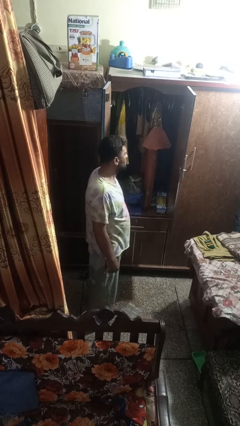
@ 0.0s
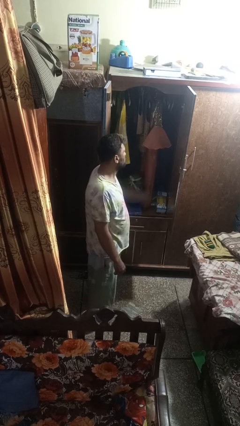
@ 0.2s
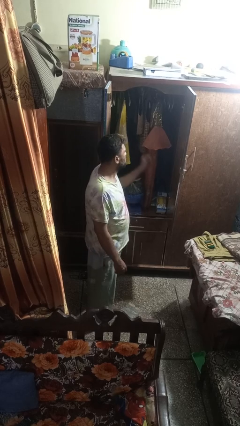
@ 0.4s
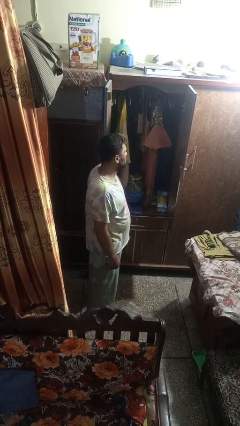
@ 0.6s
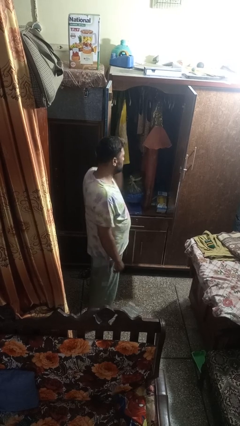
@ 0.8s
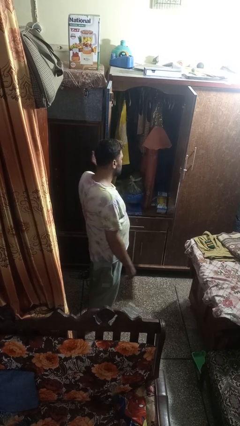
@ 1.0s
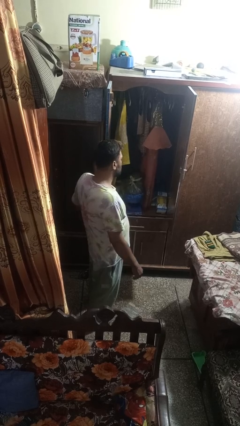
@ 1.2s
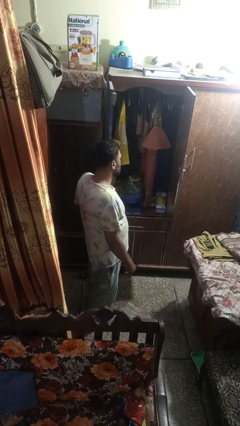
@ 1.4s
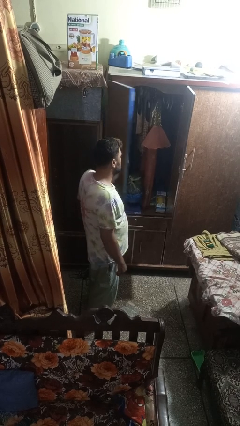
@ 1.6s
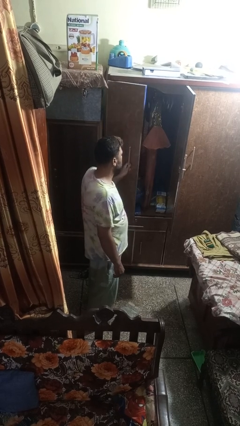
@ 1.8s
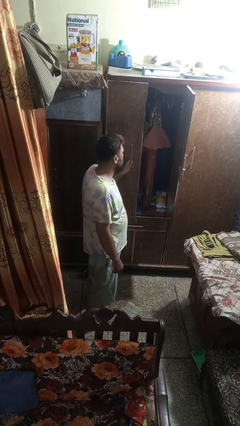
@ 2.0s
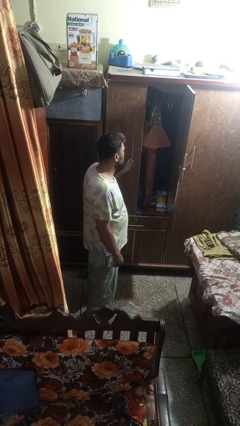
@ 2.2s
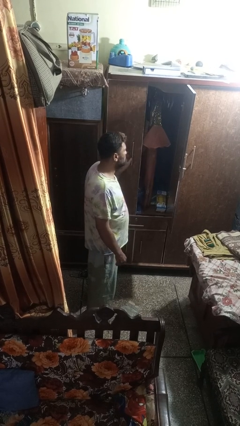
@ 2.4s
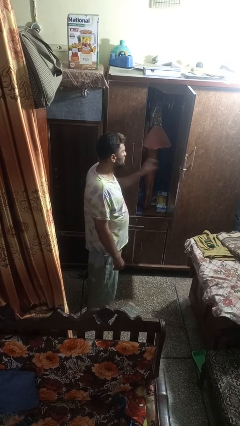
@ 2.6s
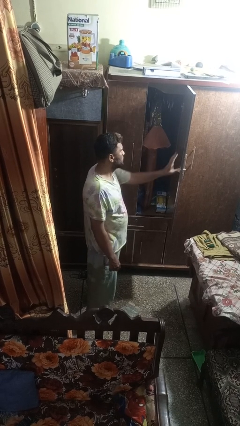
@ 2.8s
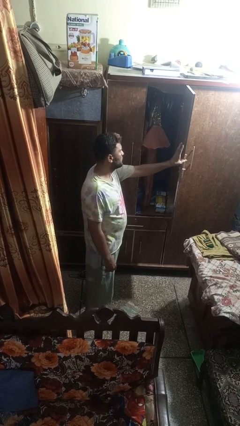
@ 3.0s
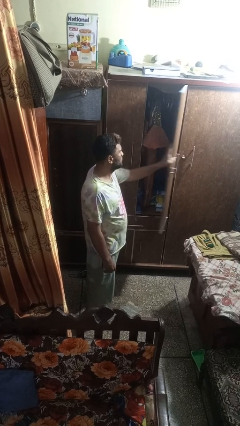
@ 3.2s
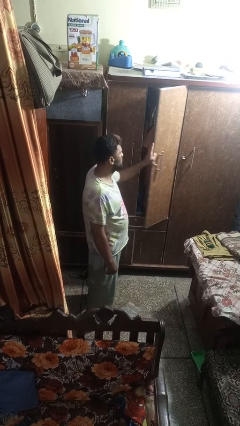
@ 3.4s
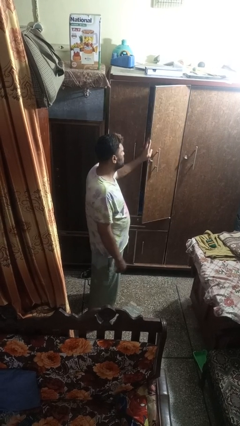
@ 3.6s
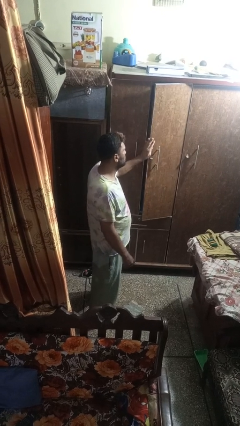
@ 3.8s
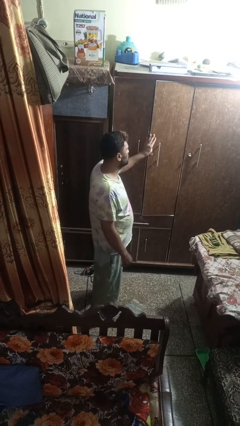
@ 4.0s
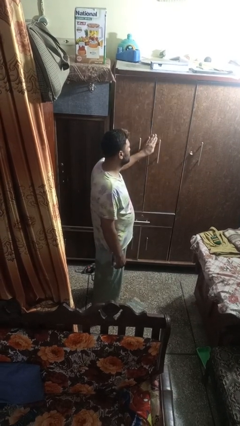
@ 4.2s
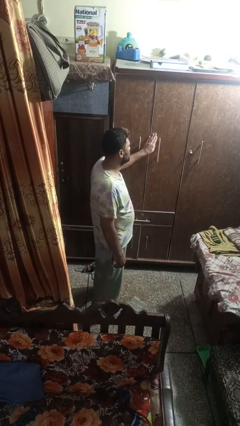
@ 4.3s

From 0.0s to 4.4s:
person closes closet door

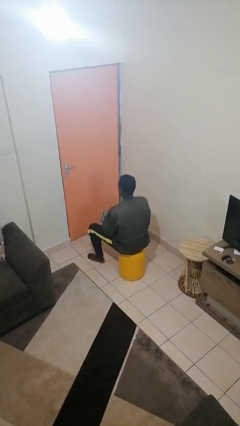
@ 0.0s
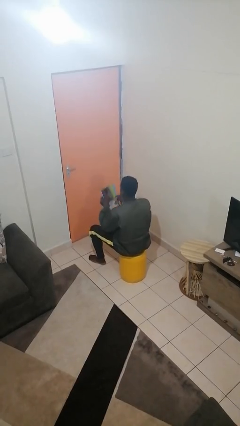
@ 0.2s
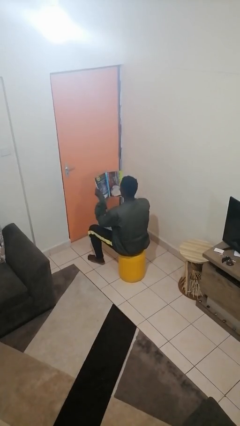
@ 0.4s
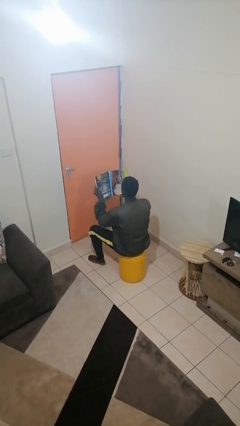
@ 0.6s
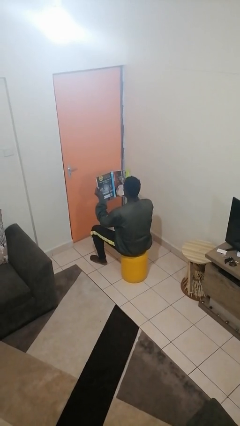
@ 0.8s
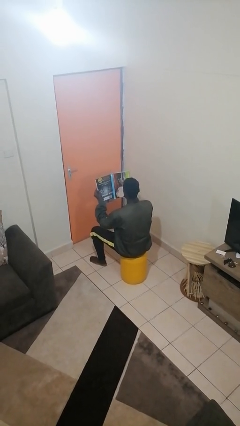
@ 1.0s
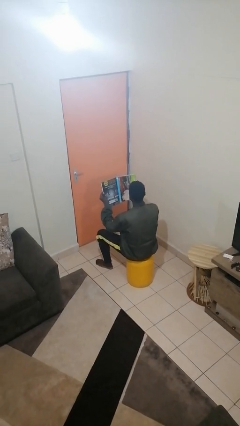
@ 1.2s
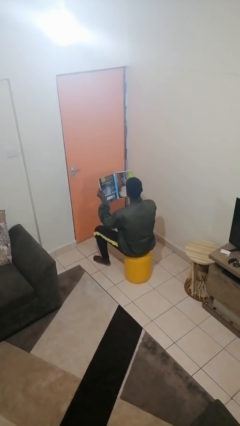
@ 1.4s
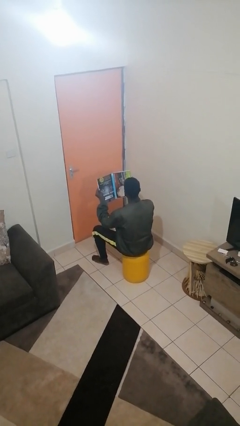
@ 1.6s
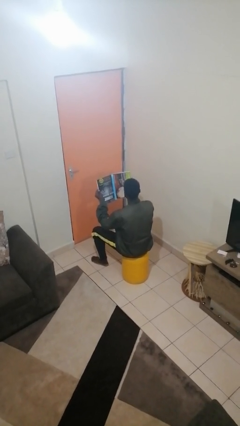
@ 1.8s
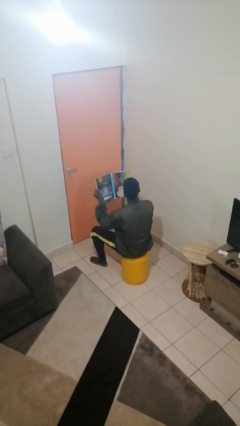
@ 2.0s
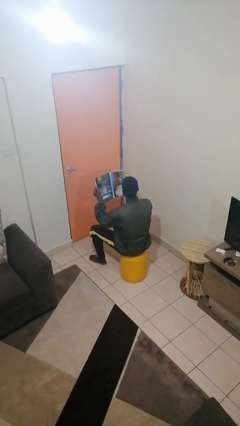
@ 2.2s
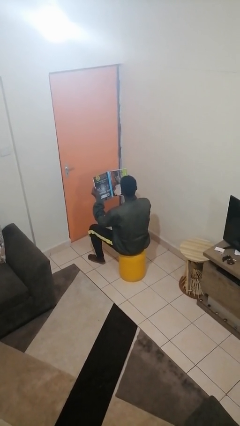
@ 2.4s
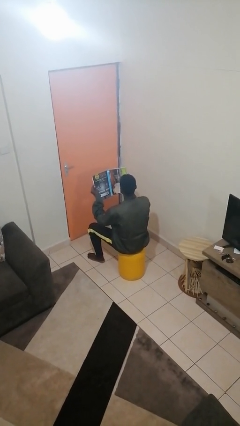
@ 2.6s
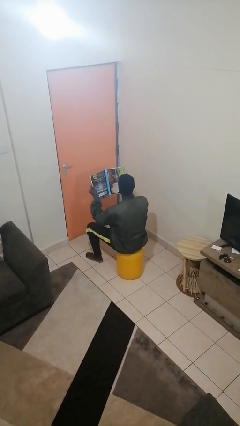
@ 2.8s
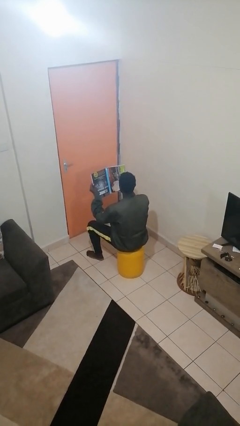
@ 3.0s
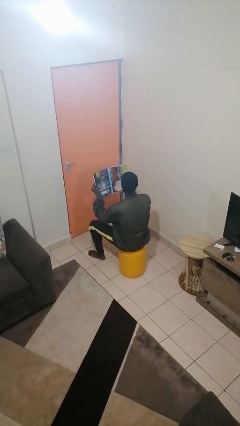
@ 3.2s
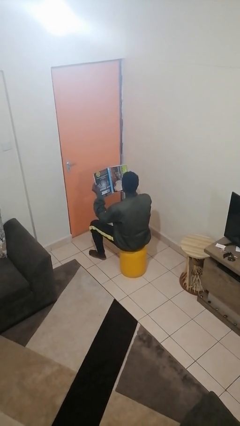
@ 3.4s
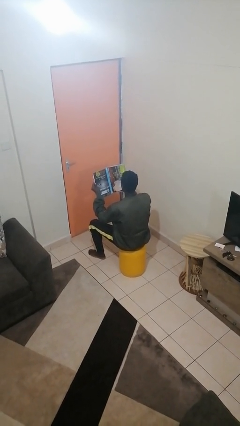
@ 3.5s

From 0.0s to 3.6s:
person reads magazine

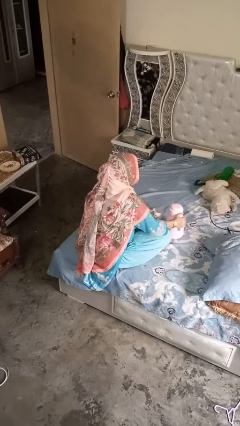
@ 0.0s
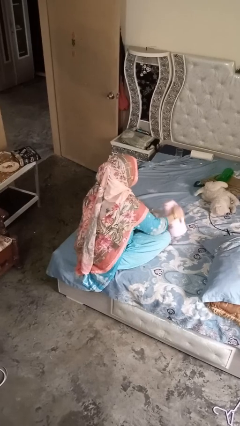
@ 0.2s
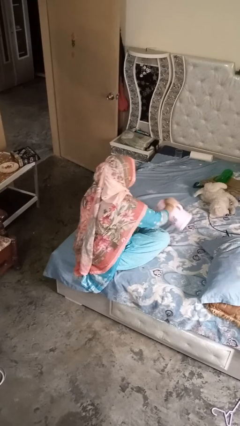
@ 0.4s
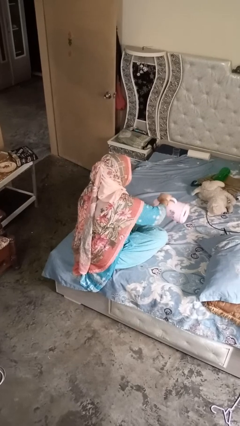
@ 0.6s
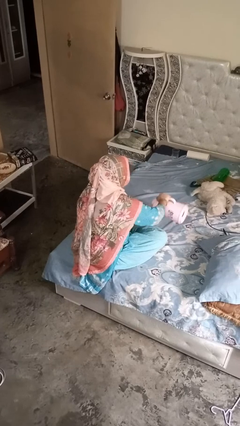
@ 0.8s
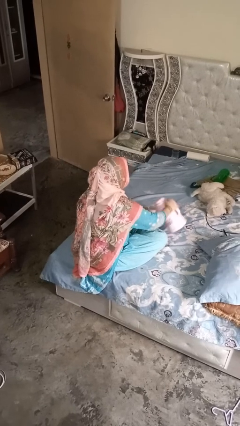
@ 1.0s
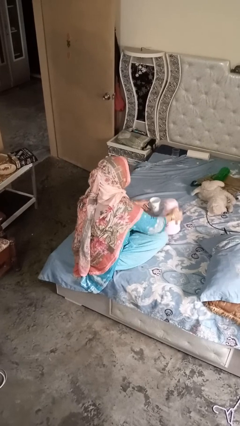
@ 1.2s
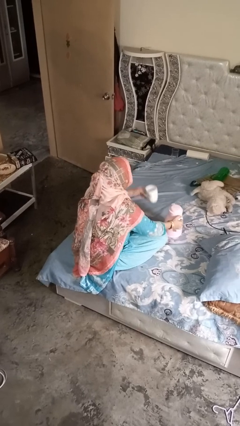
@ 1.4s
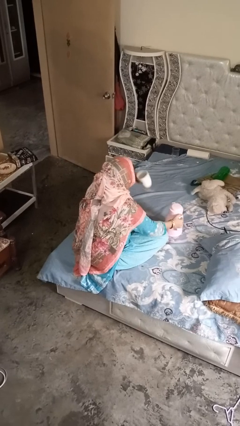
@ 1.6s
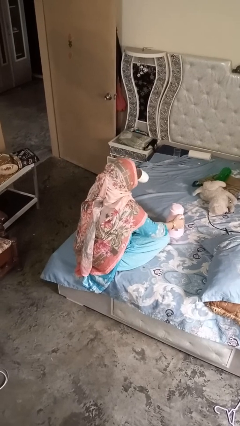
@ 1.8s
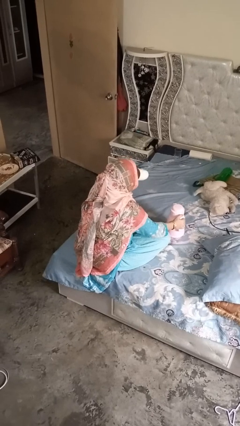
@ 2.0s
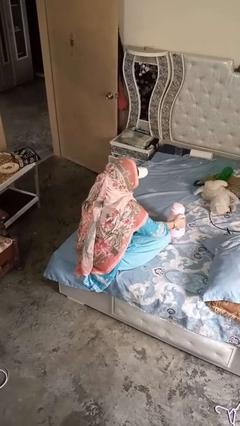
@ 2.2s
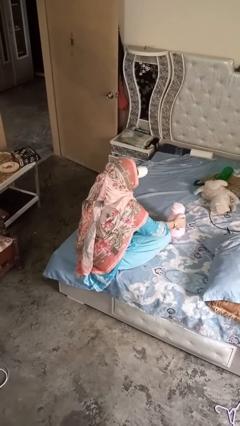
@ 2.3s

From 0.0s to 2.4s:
person pours coffee into mug

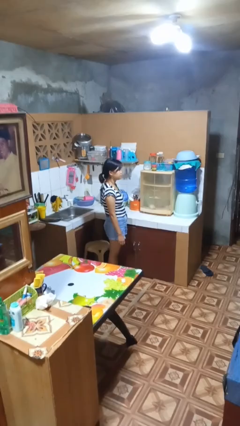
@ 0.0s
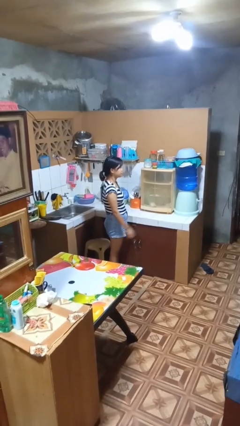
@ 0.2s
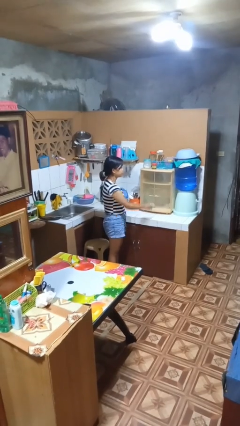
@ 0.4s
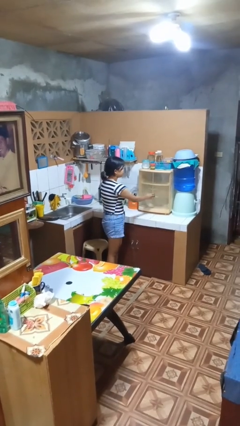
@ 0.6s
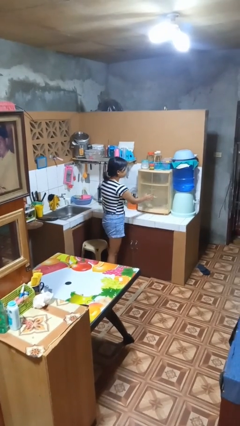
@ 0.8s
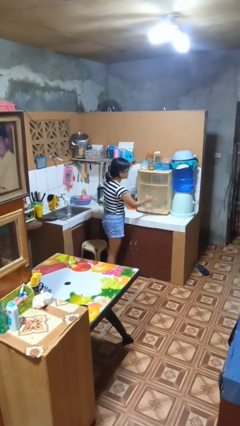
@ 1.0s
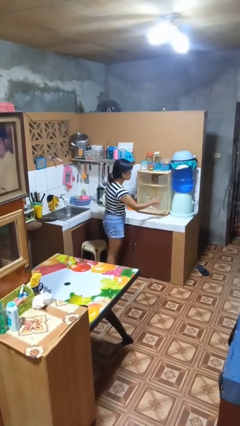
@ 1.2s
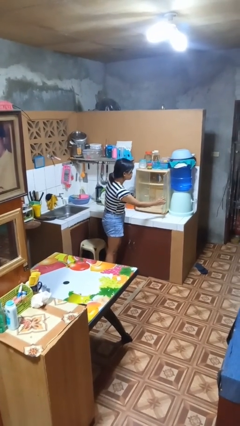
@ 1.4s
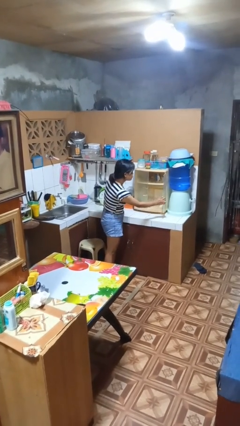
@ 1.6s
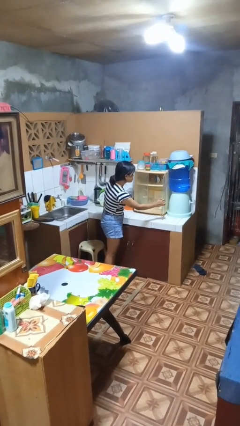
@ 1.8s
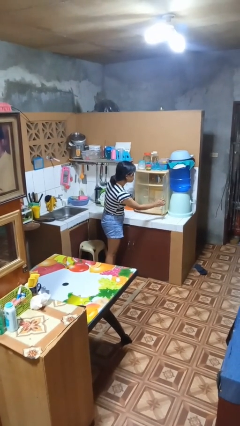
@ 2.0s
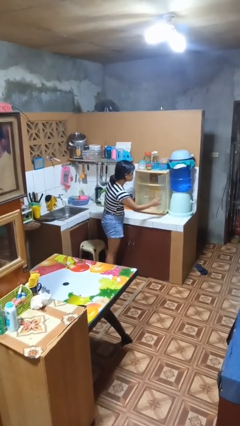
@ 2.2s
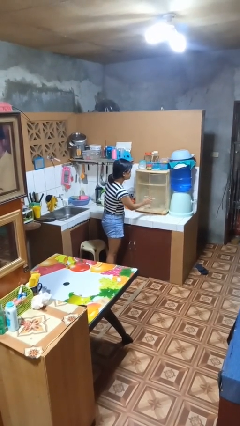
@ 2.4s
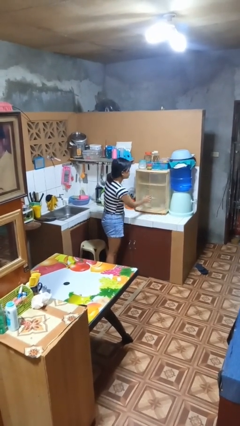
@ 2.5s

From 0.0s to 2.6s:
person opens cabinet

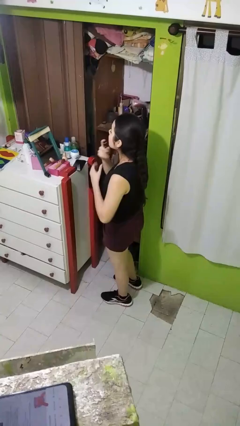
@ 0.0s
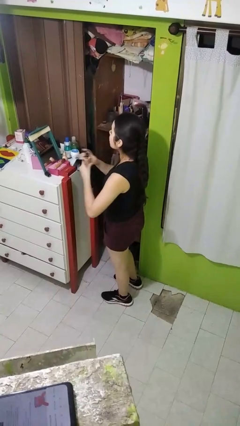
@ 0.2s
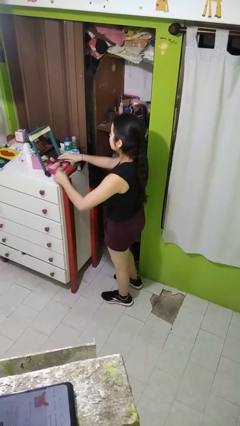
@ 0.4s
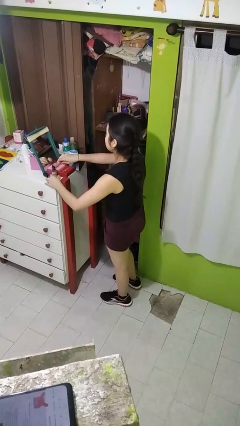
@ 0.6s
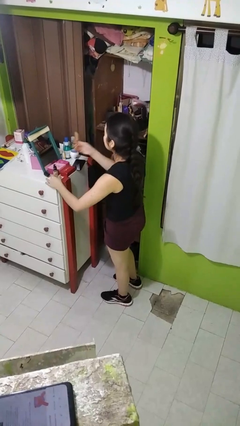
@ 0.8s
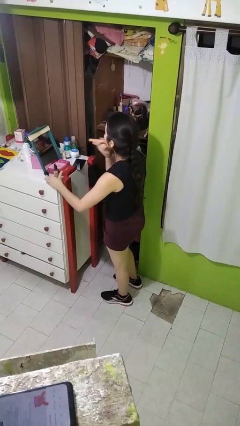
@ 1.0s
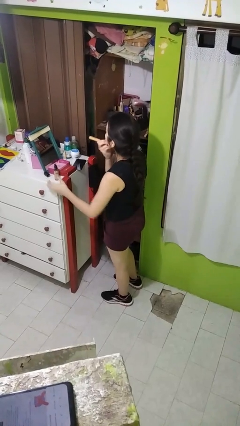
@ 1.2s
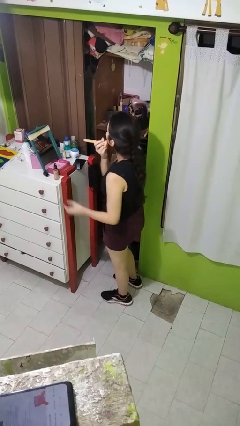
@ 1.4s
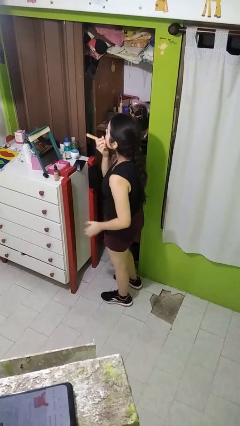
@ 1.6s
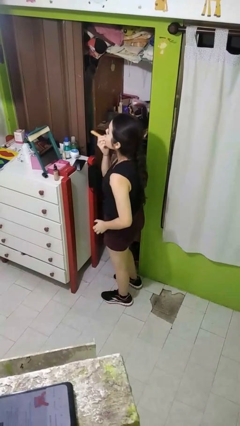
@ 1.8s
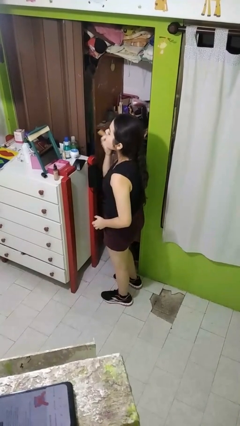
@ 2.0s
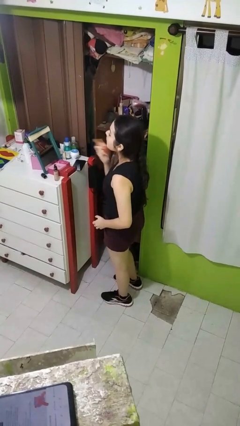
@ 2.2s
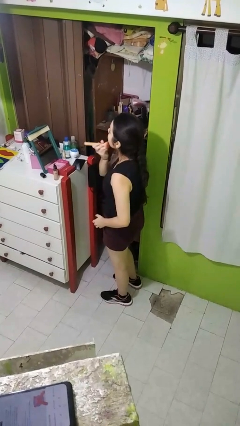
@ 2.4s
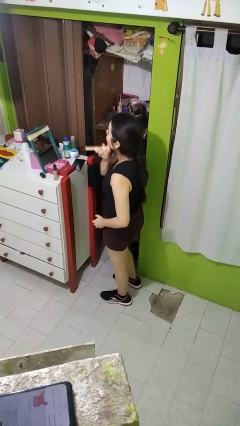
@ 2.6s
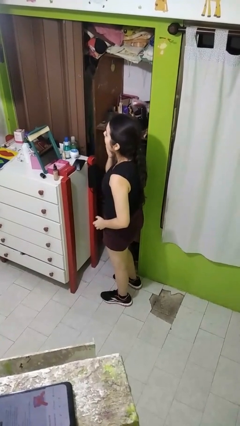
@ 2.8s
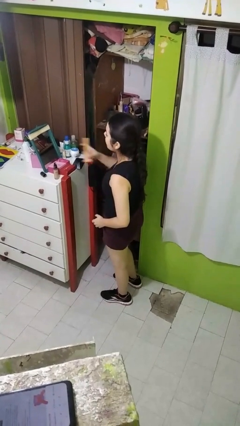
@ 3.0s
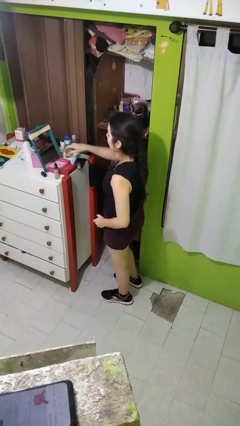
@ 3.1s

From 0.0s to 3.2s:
person applies foundation makeup

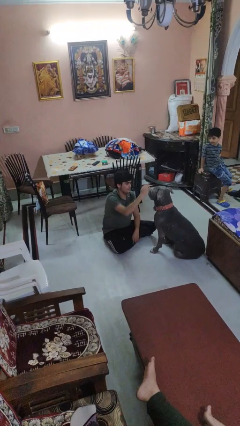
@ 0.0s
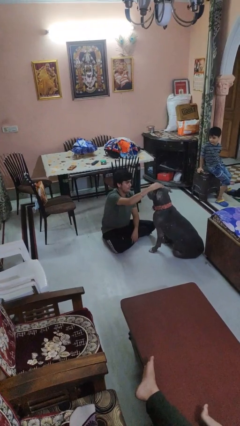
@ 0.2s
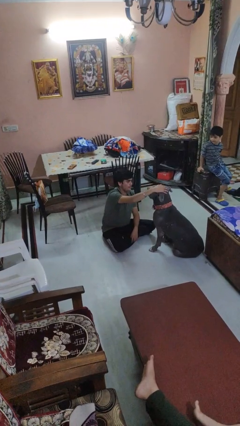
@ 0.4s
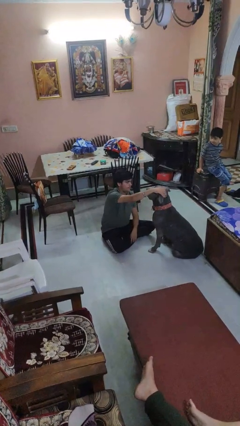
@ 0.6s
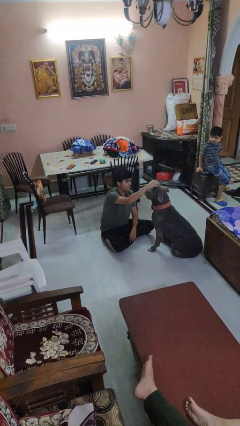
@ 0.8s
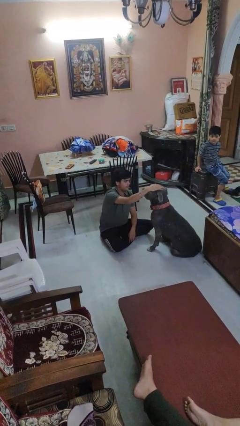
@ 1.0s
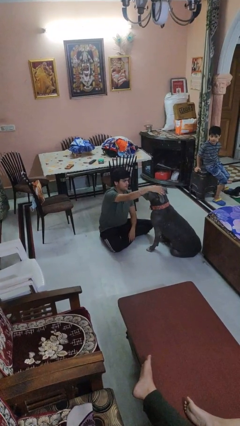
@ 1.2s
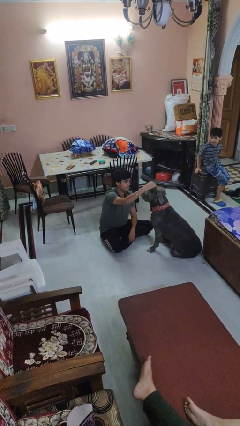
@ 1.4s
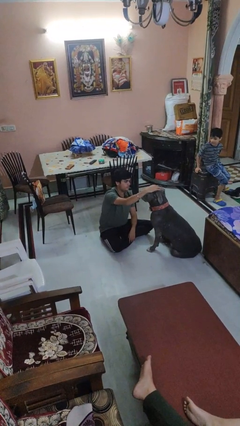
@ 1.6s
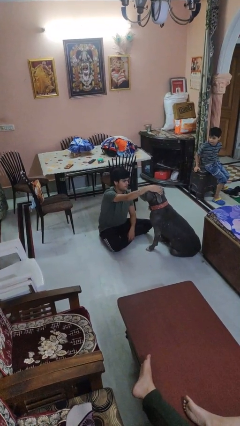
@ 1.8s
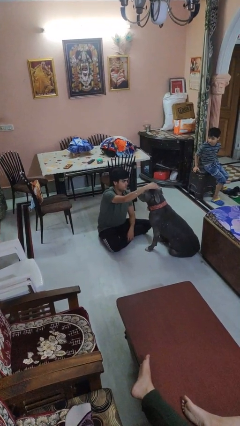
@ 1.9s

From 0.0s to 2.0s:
person pets dog
